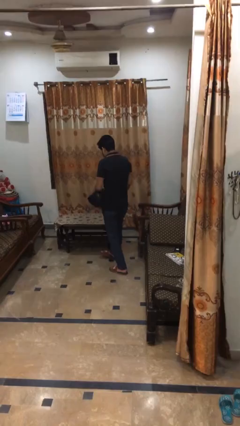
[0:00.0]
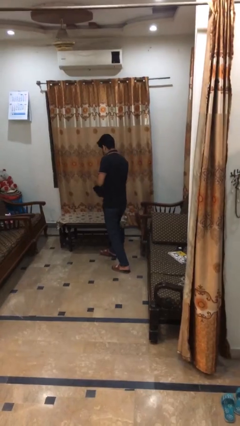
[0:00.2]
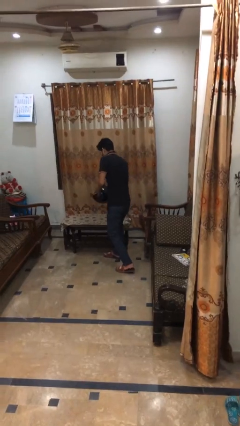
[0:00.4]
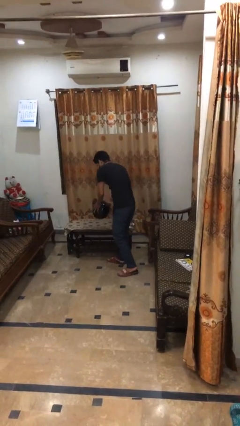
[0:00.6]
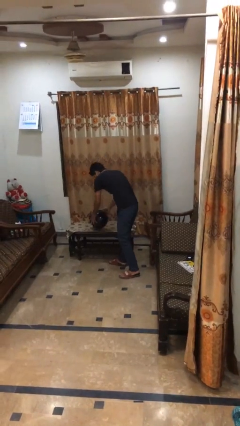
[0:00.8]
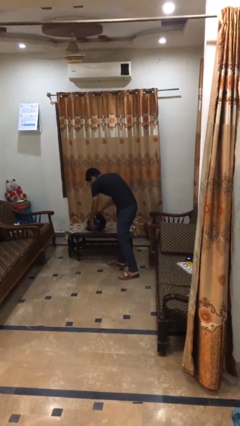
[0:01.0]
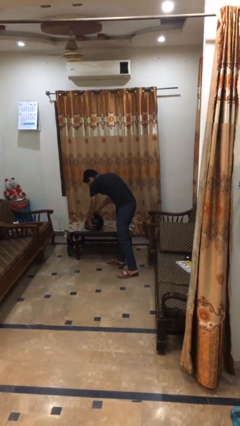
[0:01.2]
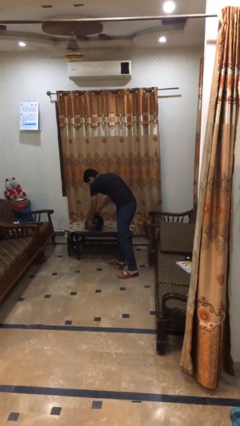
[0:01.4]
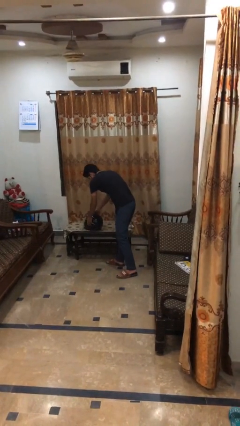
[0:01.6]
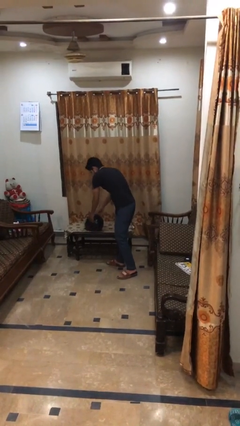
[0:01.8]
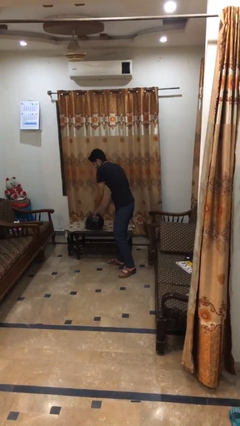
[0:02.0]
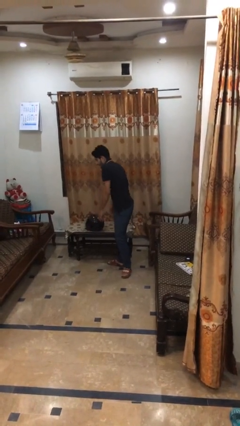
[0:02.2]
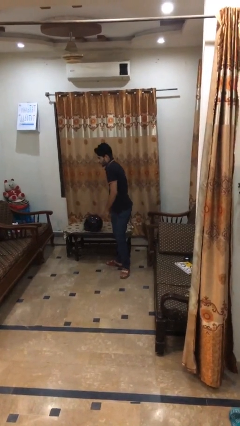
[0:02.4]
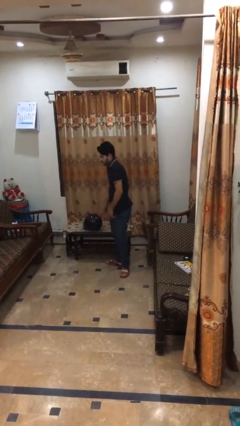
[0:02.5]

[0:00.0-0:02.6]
person puts down object on table

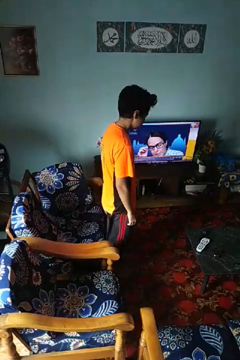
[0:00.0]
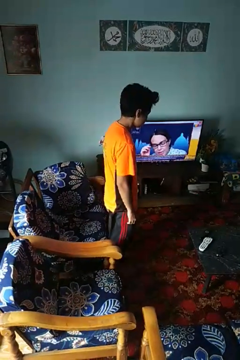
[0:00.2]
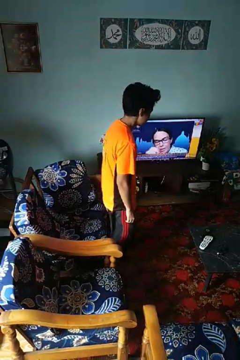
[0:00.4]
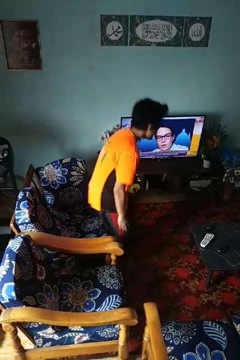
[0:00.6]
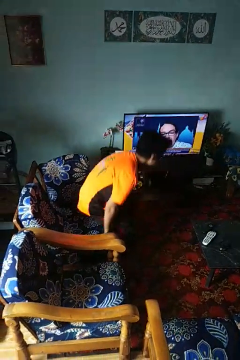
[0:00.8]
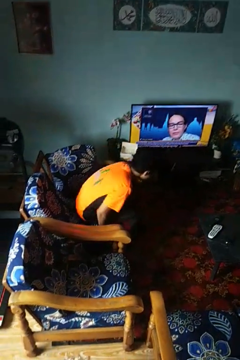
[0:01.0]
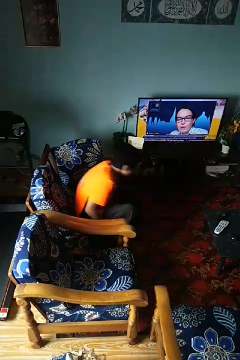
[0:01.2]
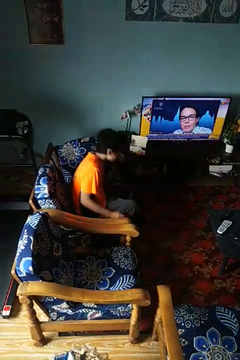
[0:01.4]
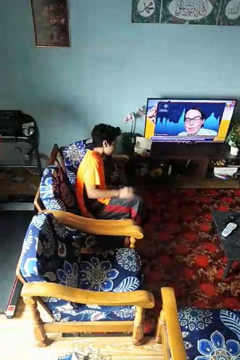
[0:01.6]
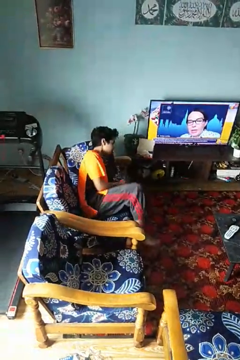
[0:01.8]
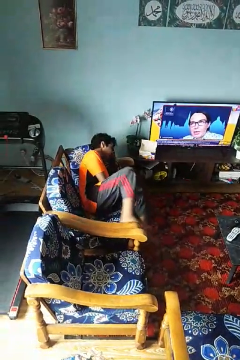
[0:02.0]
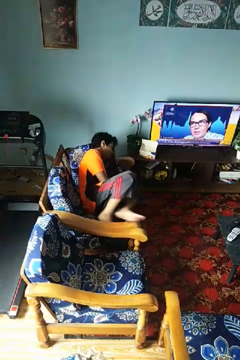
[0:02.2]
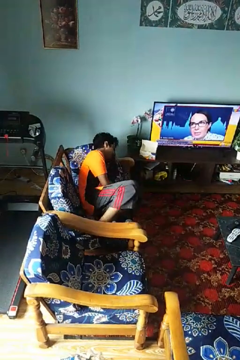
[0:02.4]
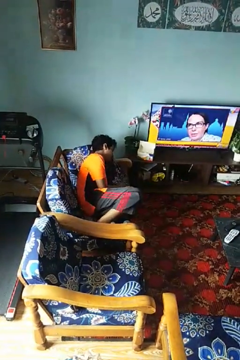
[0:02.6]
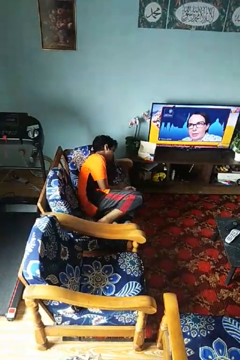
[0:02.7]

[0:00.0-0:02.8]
person lies down on couch

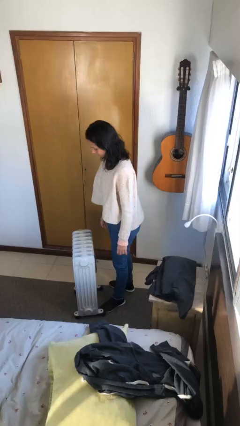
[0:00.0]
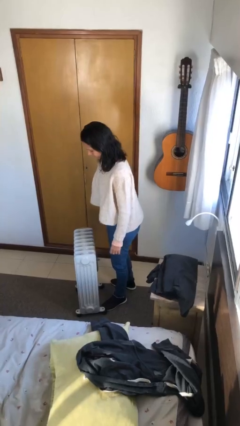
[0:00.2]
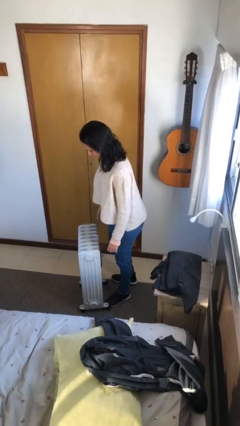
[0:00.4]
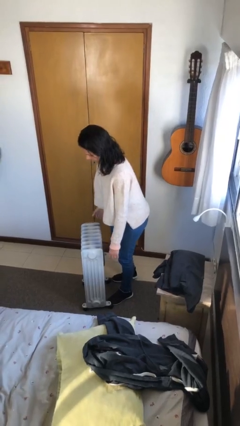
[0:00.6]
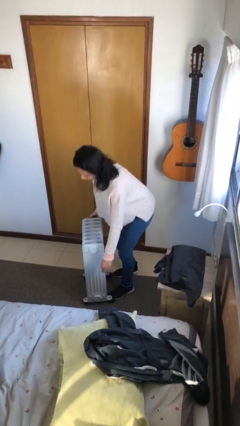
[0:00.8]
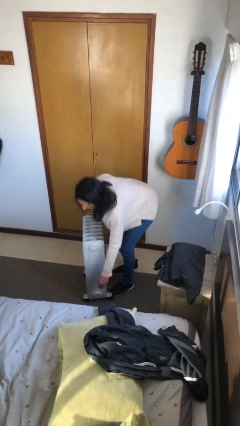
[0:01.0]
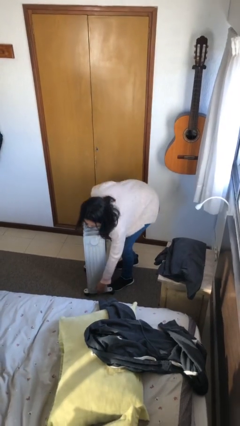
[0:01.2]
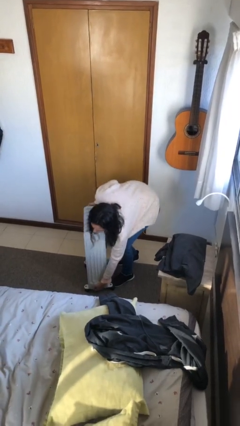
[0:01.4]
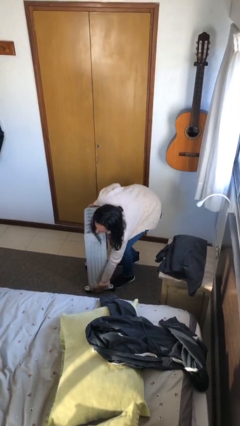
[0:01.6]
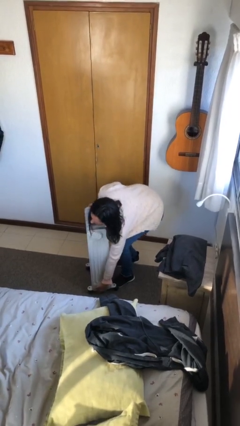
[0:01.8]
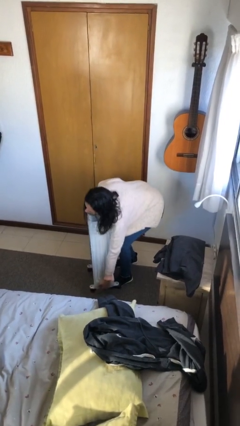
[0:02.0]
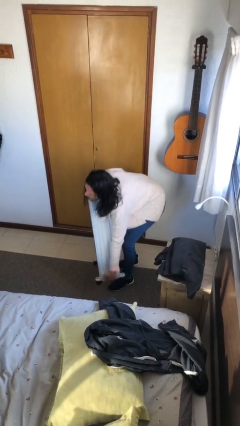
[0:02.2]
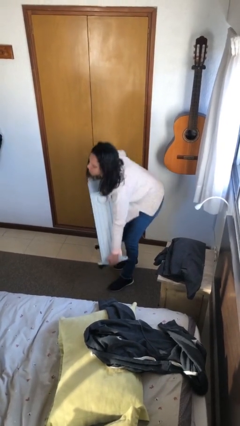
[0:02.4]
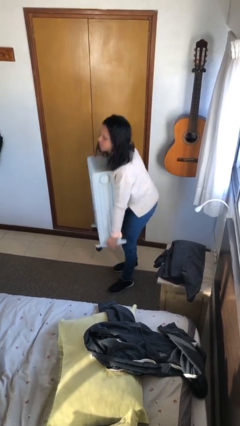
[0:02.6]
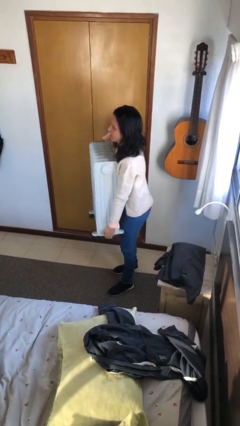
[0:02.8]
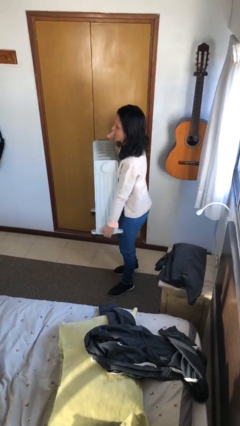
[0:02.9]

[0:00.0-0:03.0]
person picks up object from floor

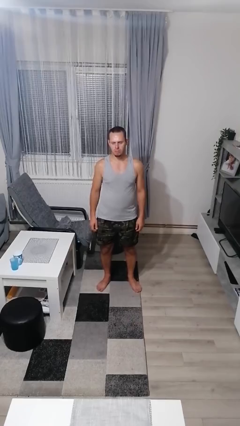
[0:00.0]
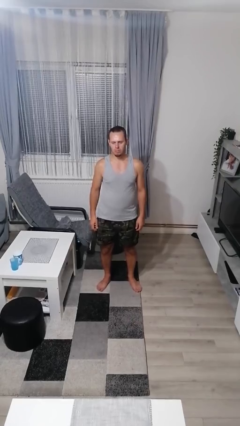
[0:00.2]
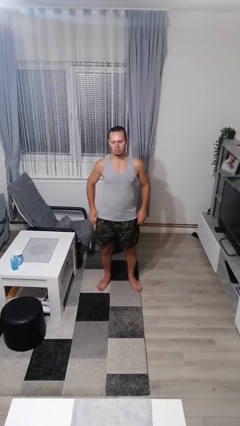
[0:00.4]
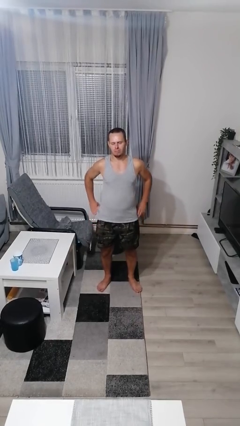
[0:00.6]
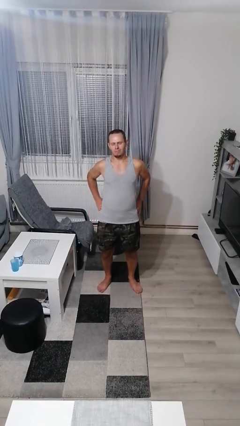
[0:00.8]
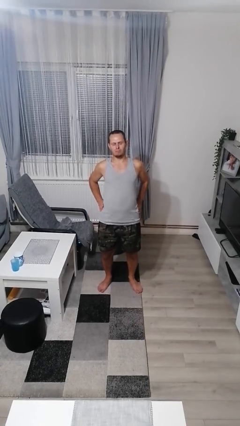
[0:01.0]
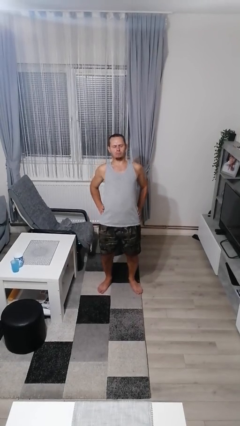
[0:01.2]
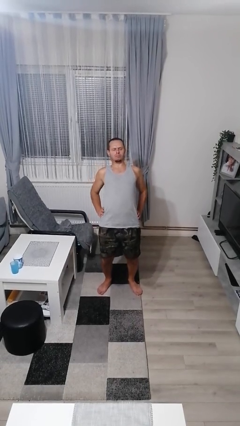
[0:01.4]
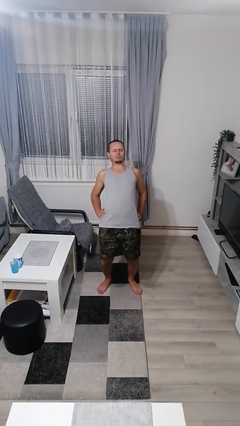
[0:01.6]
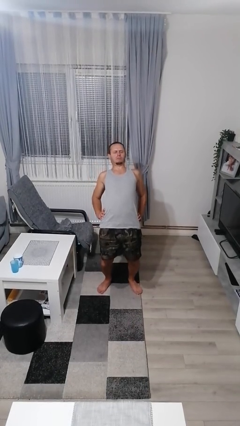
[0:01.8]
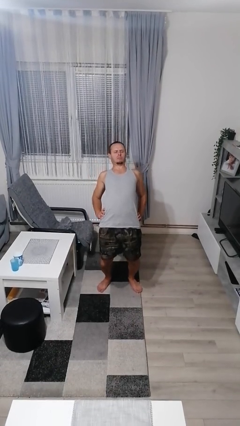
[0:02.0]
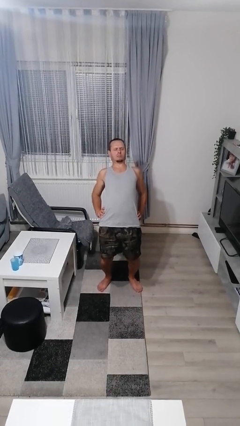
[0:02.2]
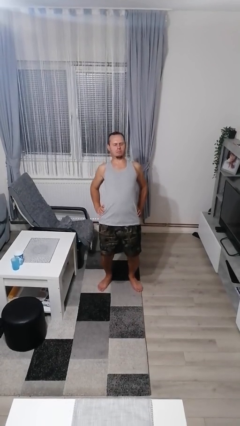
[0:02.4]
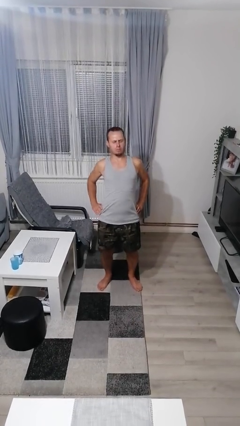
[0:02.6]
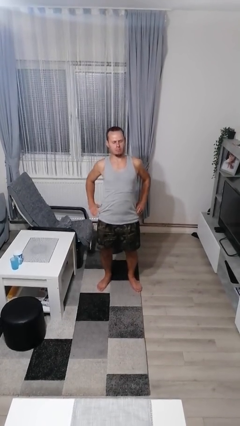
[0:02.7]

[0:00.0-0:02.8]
person stretches back

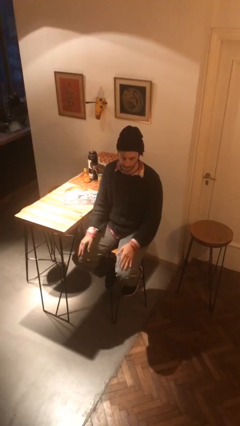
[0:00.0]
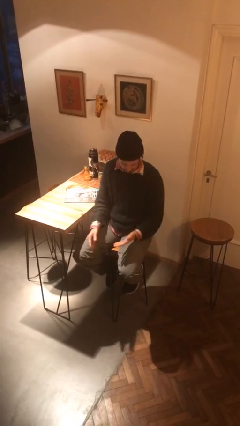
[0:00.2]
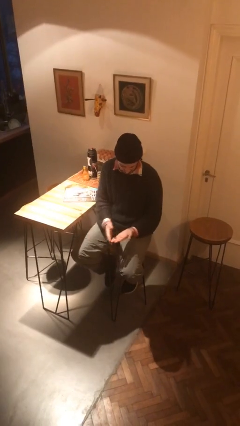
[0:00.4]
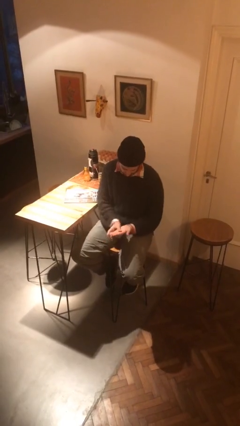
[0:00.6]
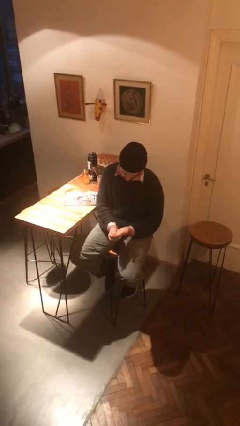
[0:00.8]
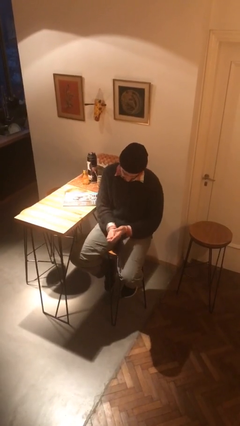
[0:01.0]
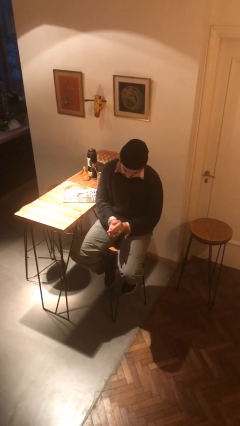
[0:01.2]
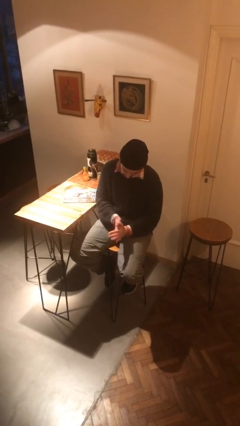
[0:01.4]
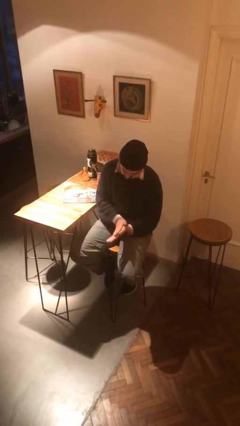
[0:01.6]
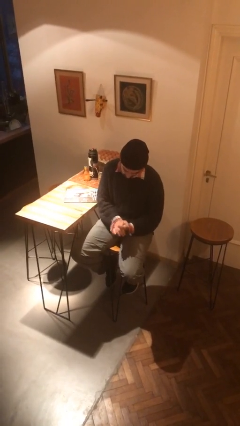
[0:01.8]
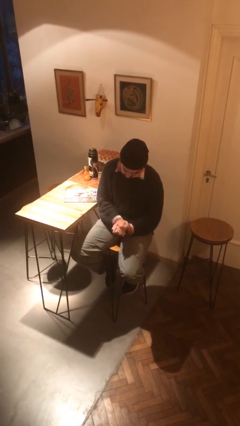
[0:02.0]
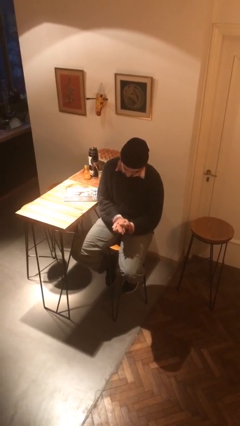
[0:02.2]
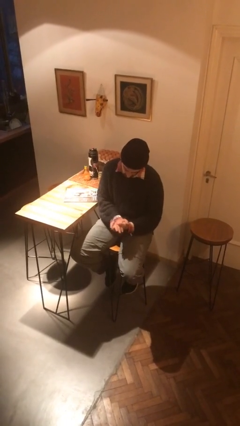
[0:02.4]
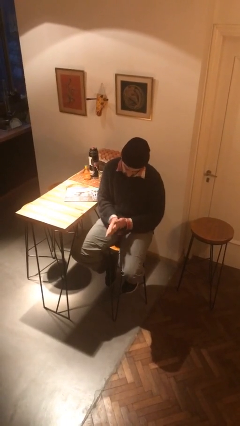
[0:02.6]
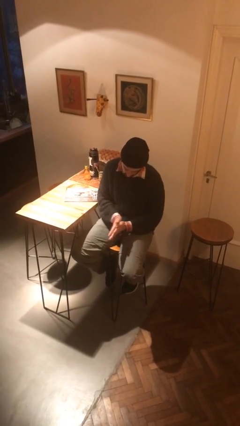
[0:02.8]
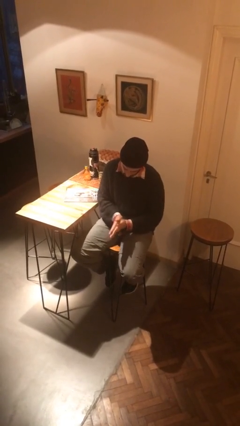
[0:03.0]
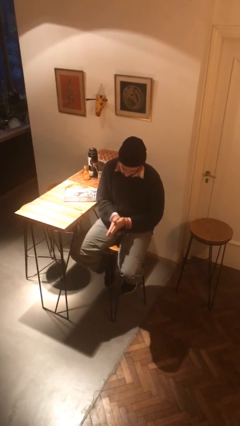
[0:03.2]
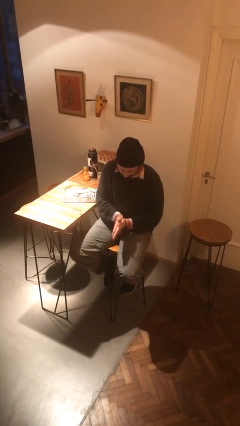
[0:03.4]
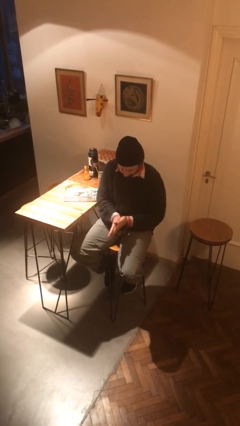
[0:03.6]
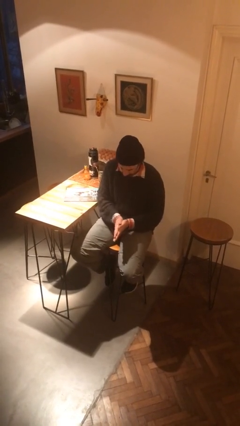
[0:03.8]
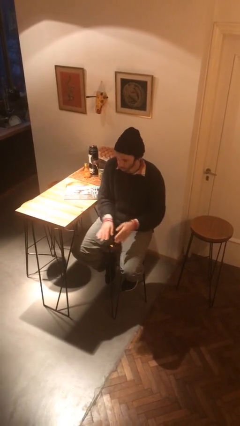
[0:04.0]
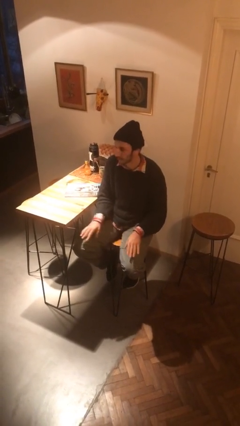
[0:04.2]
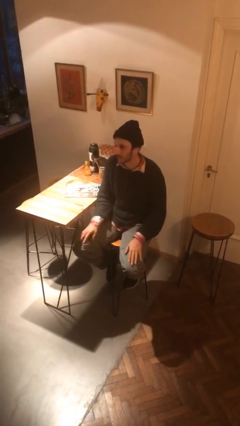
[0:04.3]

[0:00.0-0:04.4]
person looks at hands in lap

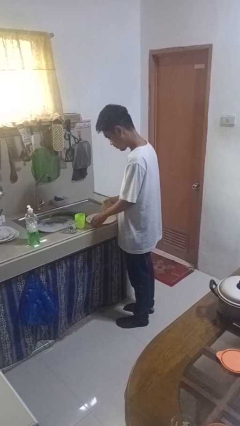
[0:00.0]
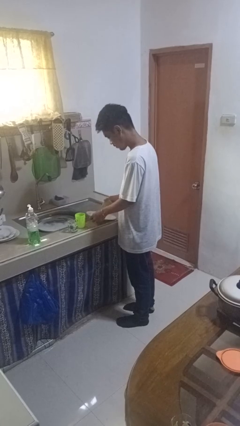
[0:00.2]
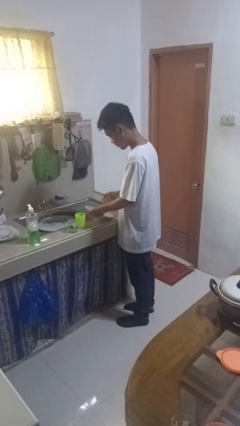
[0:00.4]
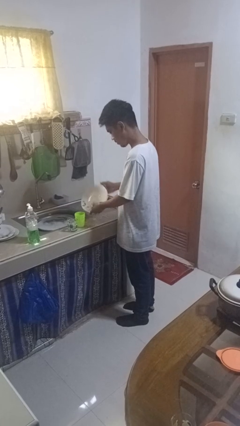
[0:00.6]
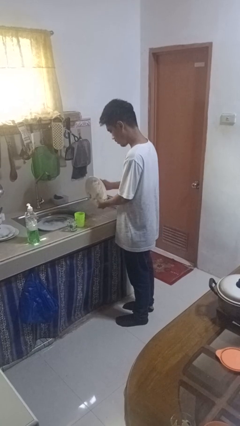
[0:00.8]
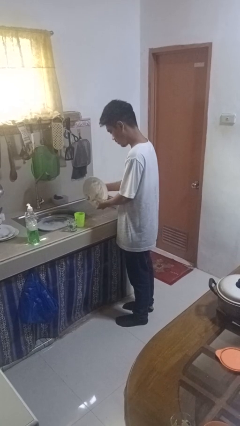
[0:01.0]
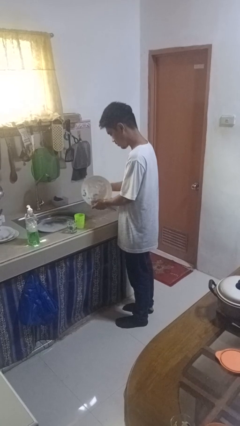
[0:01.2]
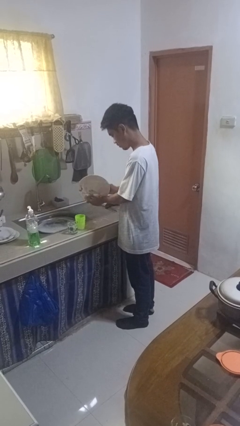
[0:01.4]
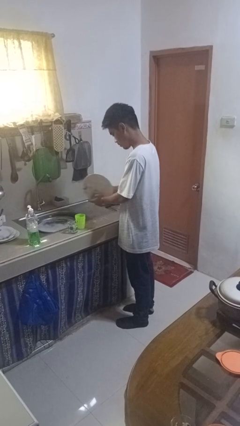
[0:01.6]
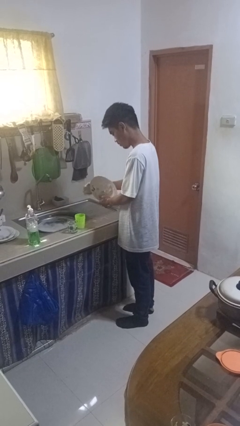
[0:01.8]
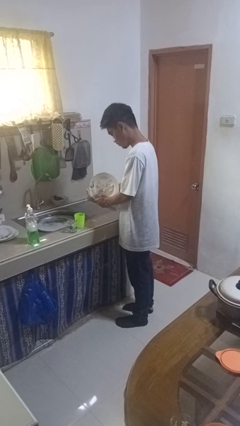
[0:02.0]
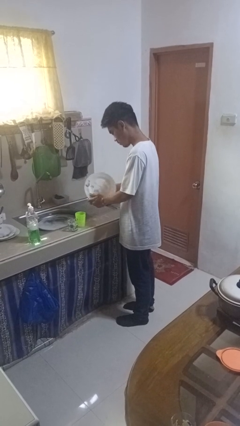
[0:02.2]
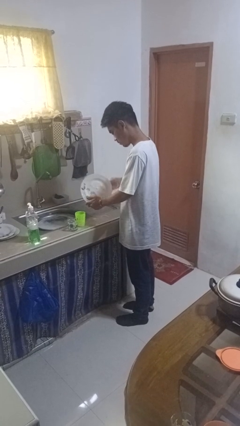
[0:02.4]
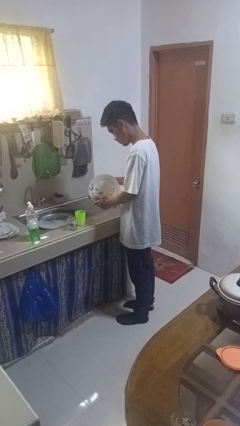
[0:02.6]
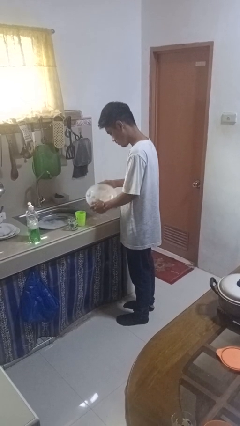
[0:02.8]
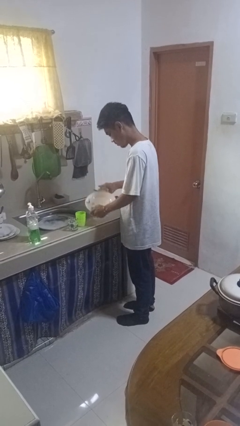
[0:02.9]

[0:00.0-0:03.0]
person washes dish
